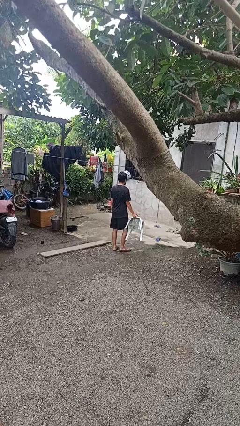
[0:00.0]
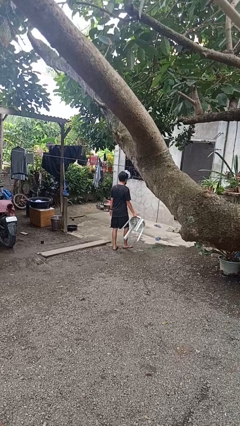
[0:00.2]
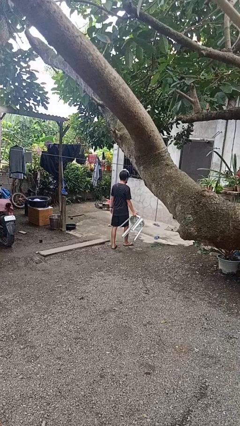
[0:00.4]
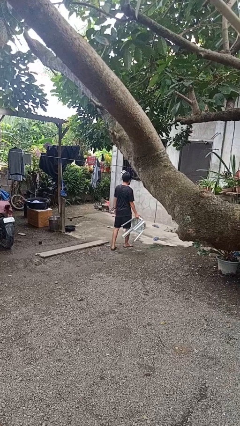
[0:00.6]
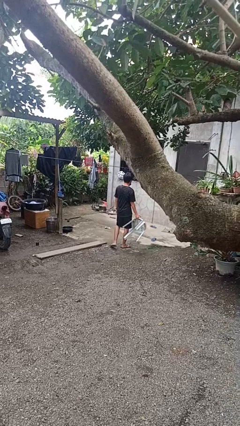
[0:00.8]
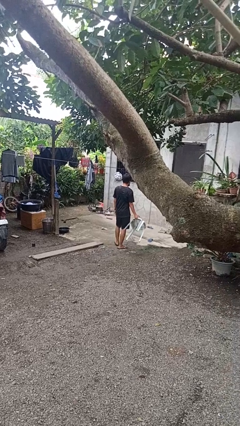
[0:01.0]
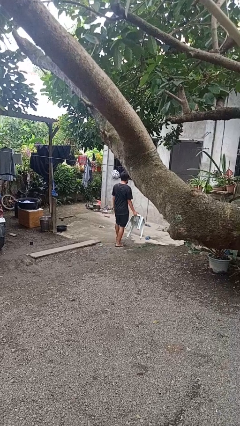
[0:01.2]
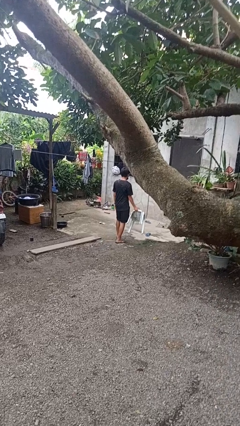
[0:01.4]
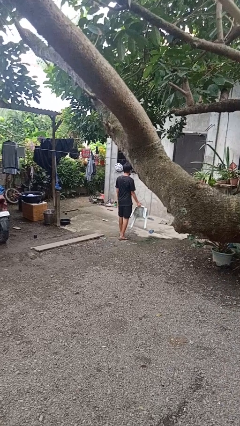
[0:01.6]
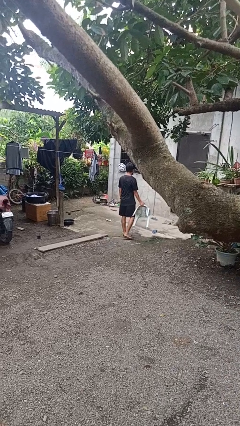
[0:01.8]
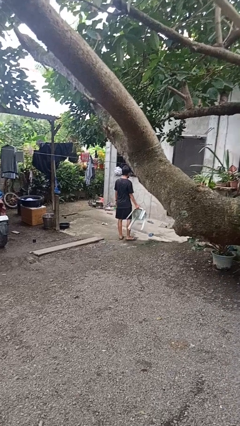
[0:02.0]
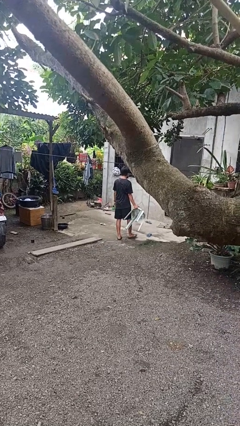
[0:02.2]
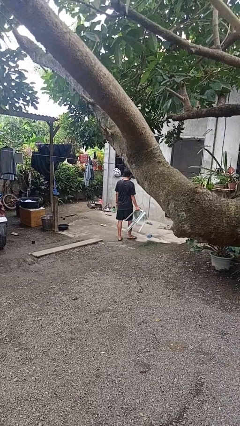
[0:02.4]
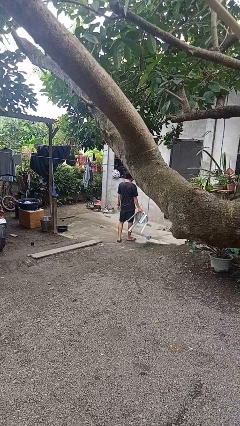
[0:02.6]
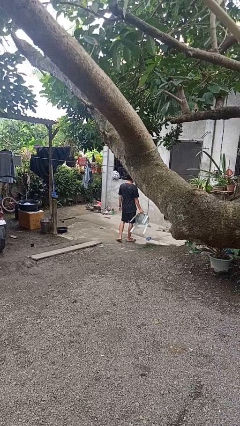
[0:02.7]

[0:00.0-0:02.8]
person carries furniture

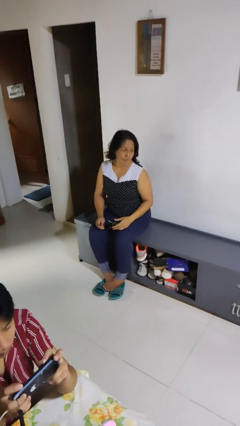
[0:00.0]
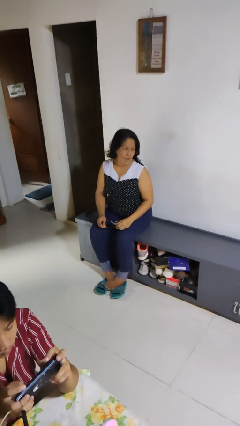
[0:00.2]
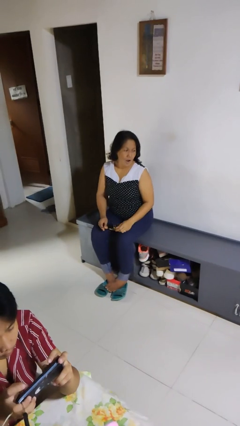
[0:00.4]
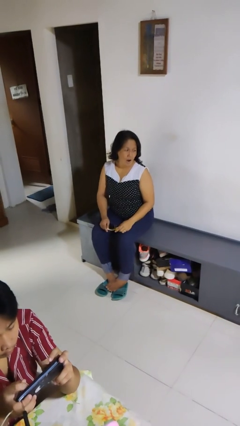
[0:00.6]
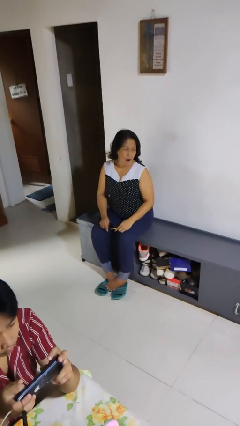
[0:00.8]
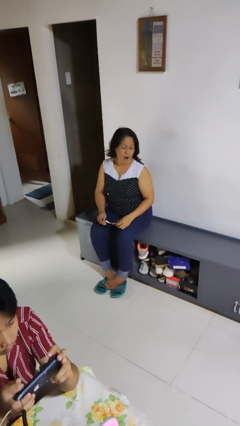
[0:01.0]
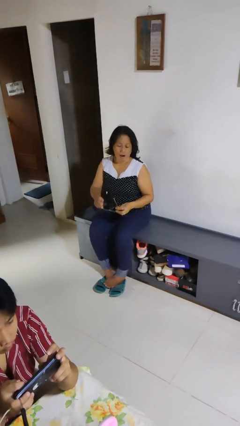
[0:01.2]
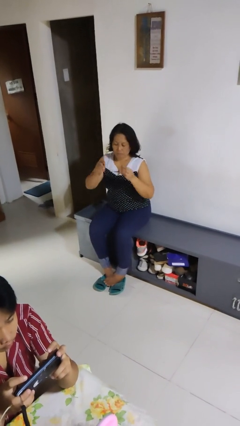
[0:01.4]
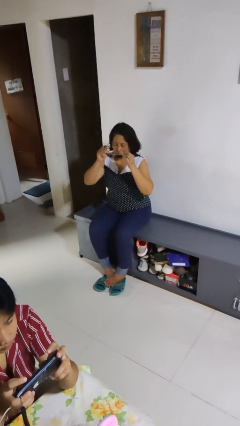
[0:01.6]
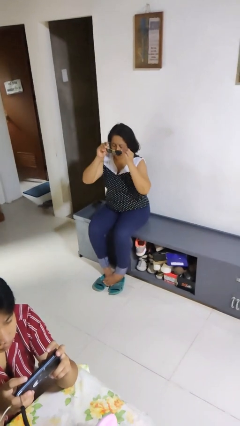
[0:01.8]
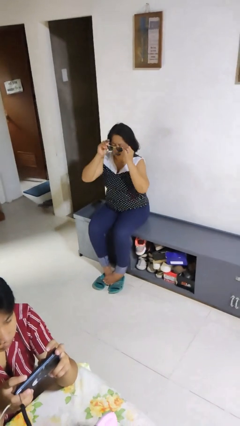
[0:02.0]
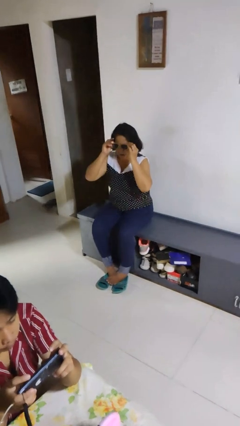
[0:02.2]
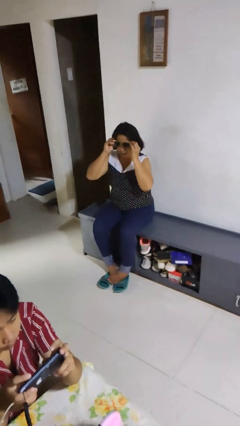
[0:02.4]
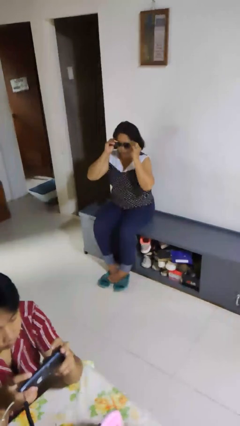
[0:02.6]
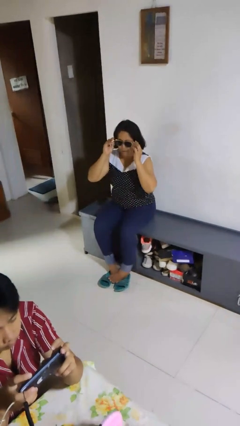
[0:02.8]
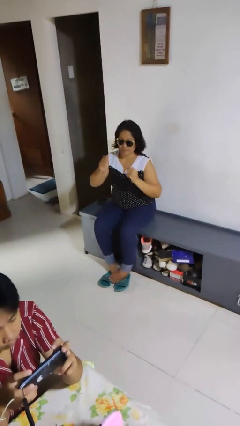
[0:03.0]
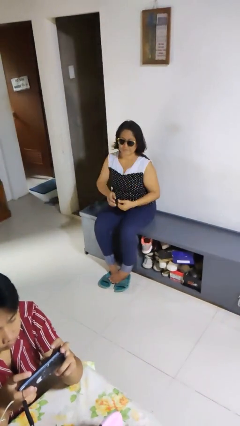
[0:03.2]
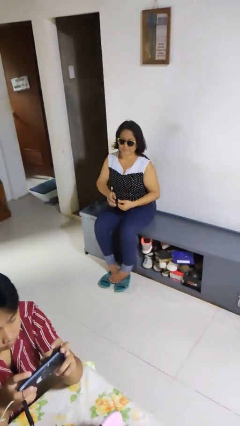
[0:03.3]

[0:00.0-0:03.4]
person puts on sunglasses

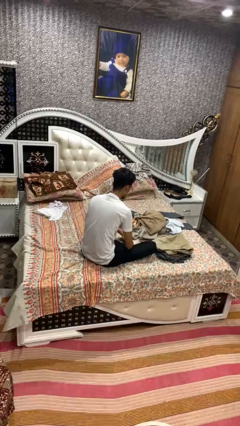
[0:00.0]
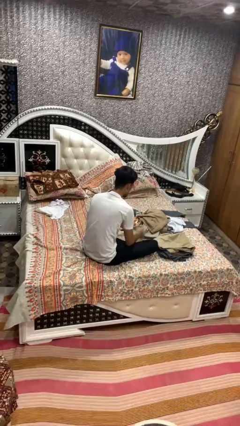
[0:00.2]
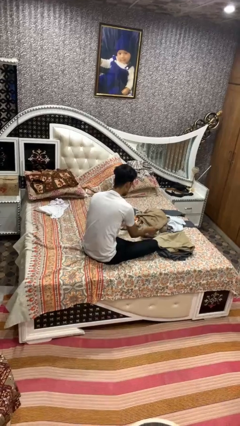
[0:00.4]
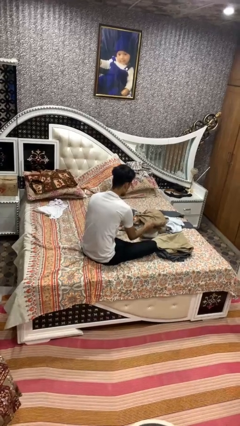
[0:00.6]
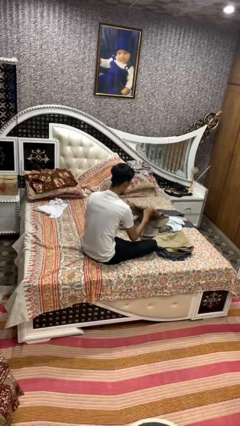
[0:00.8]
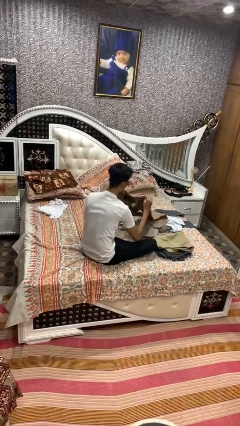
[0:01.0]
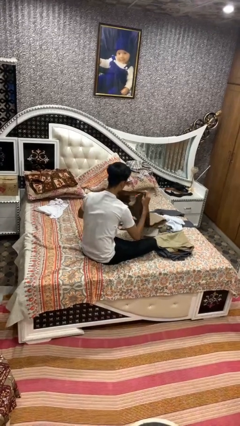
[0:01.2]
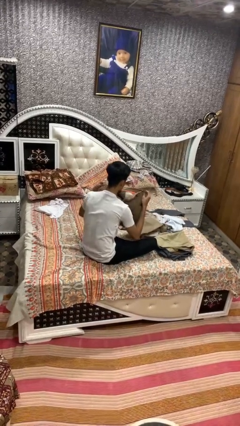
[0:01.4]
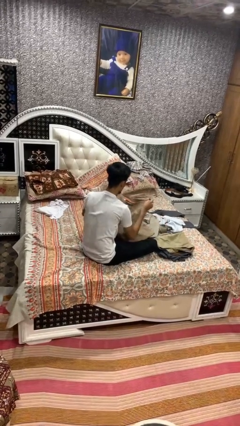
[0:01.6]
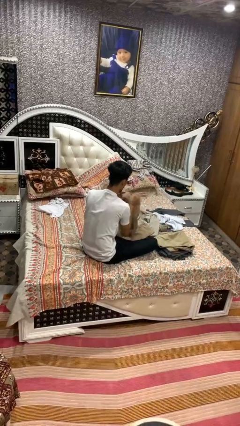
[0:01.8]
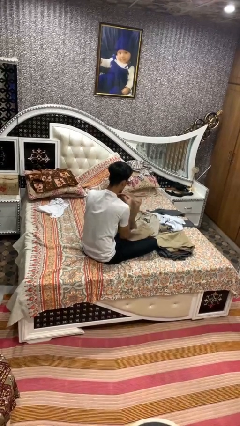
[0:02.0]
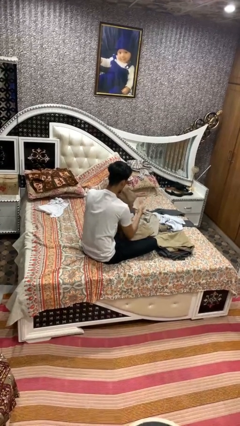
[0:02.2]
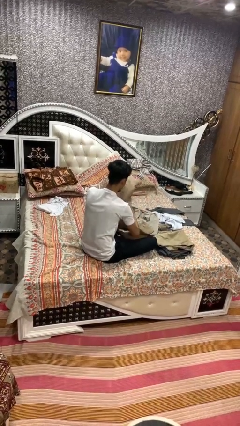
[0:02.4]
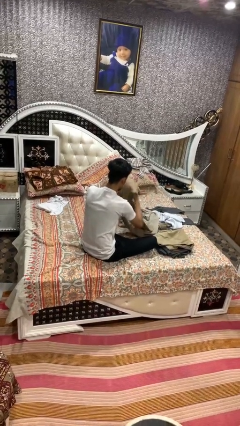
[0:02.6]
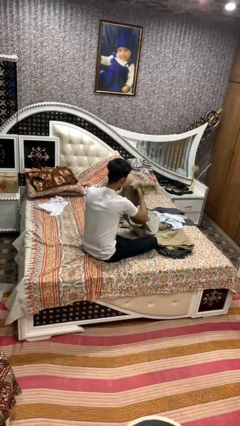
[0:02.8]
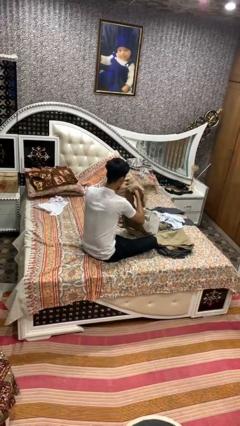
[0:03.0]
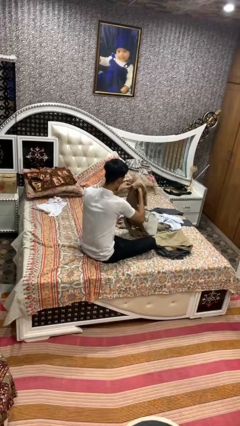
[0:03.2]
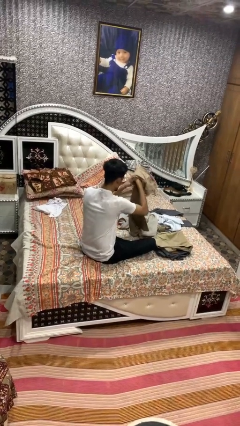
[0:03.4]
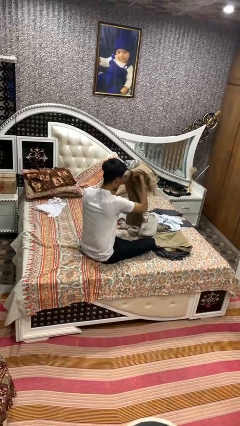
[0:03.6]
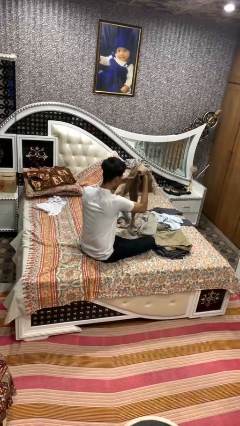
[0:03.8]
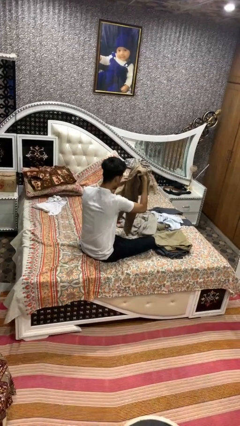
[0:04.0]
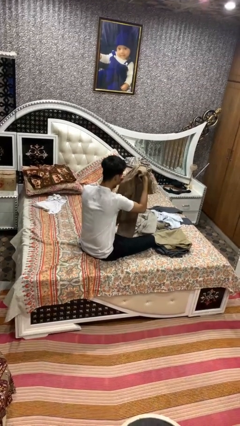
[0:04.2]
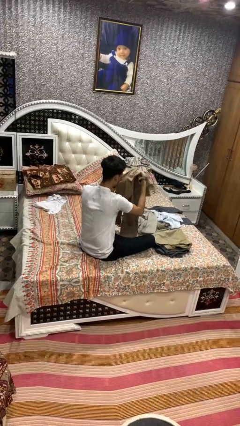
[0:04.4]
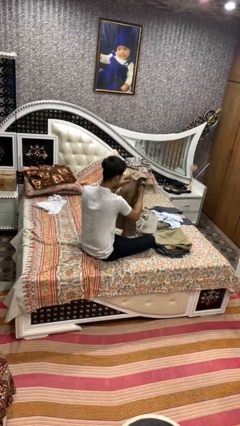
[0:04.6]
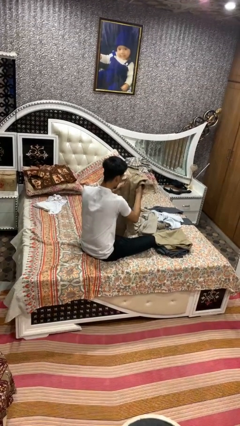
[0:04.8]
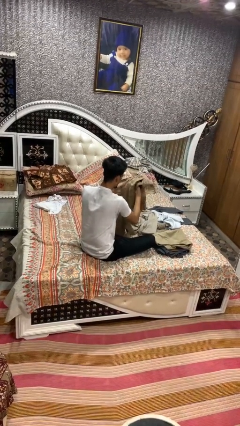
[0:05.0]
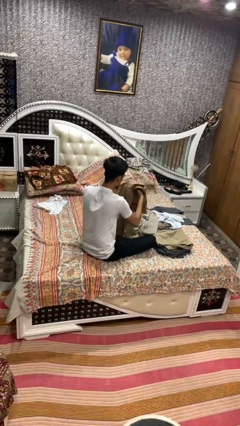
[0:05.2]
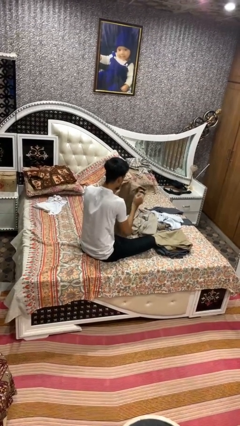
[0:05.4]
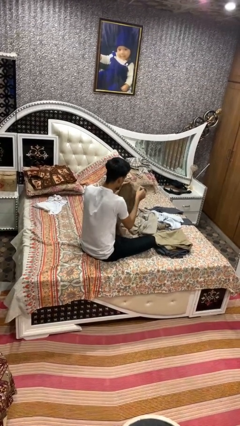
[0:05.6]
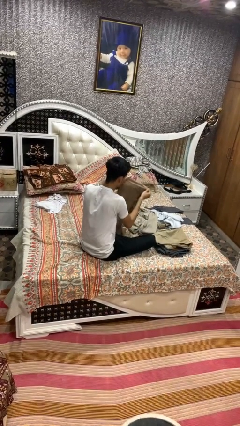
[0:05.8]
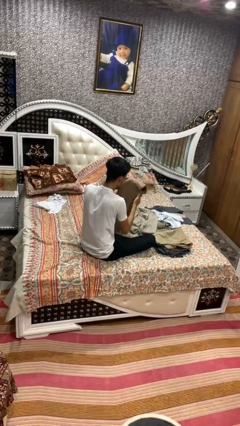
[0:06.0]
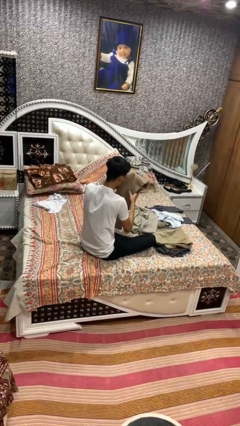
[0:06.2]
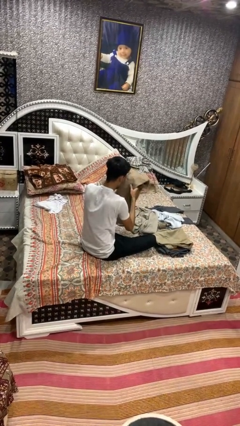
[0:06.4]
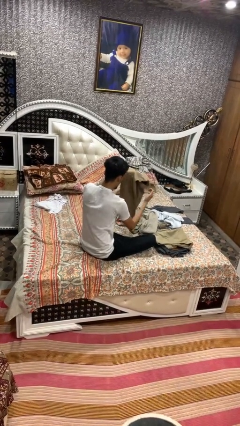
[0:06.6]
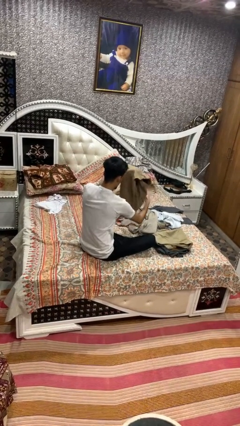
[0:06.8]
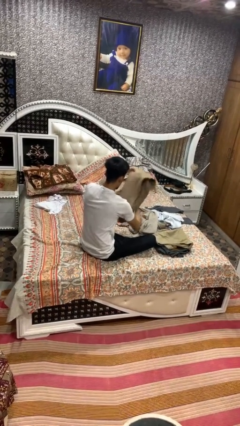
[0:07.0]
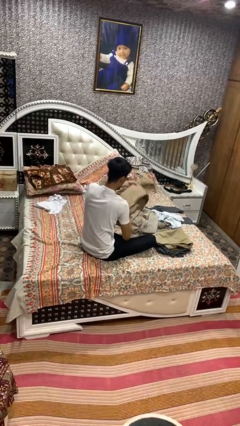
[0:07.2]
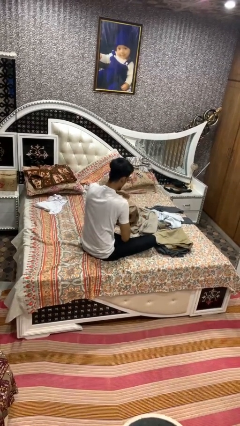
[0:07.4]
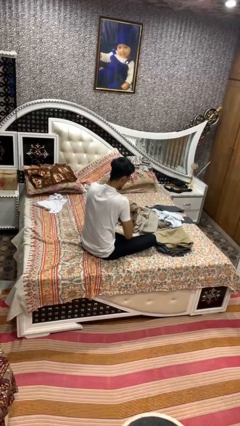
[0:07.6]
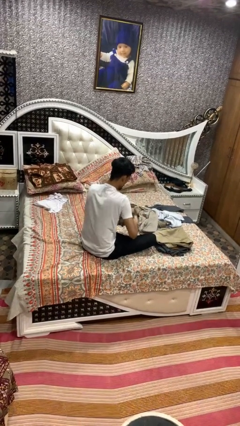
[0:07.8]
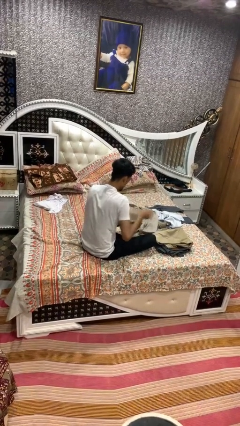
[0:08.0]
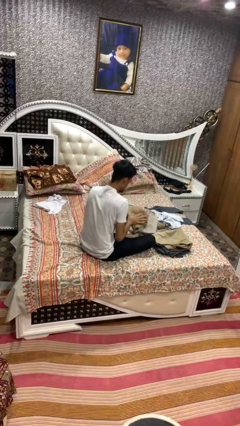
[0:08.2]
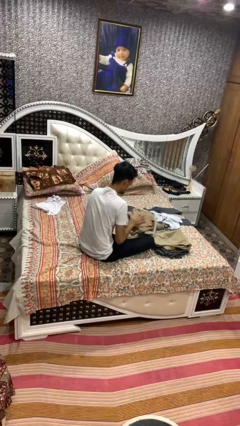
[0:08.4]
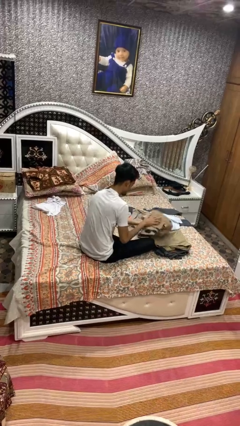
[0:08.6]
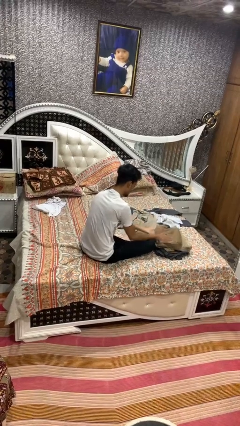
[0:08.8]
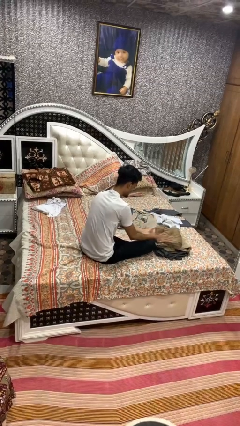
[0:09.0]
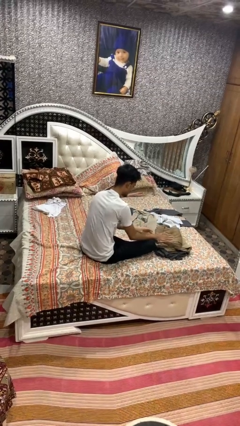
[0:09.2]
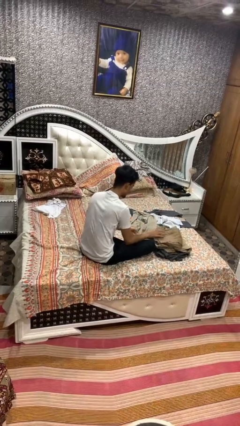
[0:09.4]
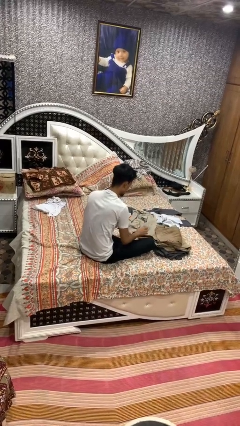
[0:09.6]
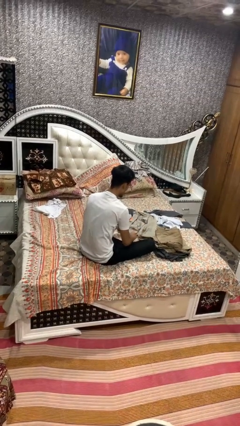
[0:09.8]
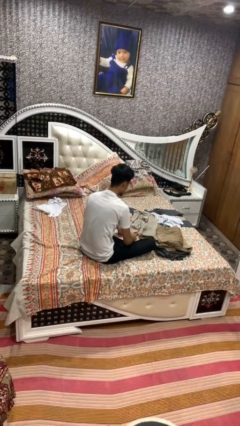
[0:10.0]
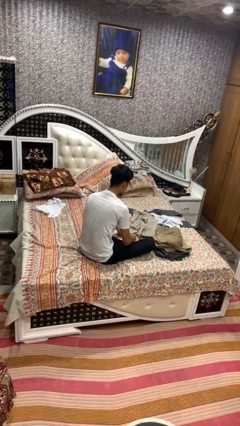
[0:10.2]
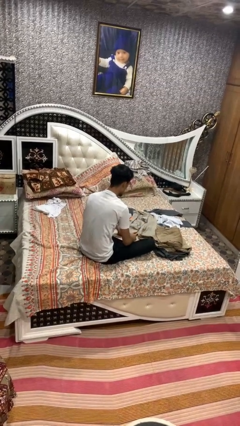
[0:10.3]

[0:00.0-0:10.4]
person folds pants

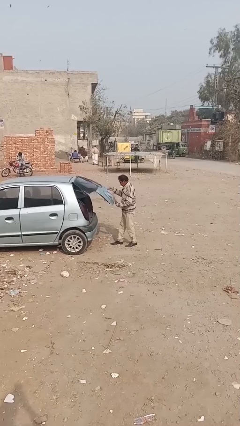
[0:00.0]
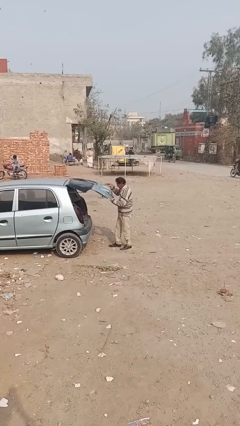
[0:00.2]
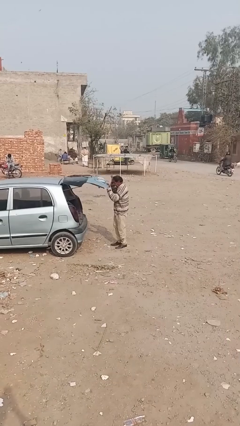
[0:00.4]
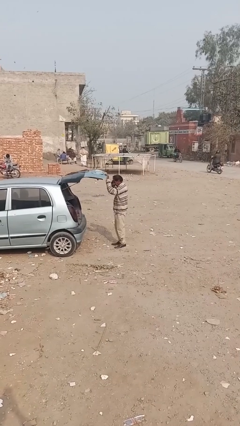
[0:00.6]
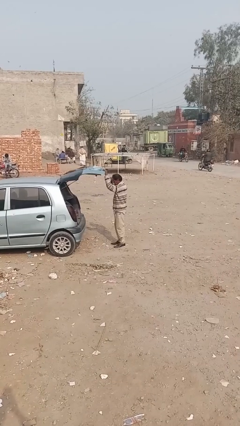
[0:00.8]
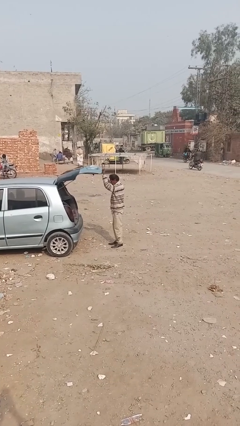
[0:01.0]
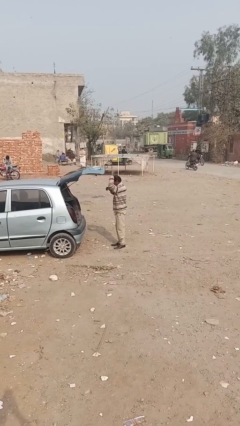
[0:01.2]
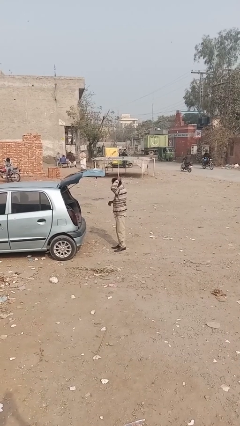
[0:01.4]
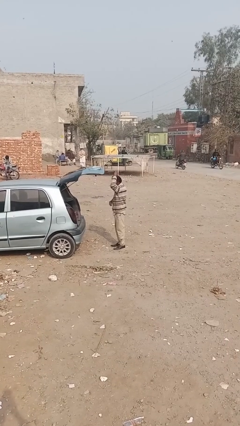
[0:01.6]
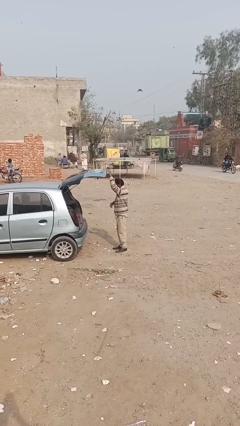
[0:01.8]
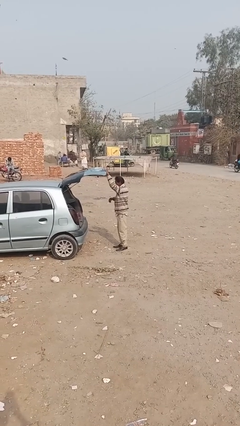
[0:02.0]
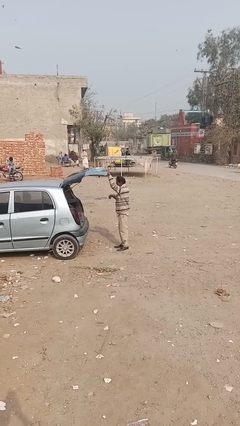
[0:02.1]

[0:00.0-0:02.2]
person opens car trunk
